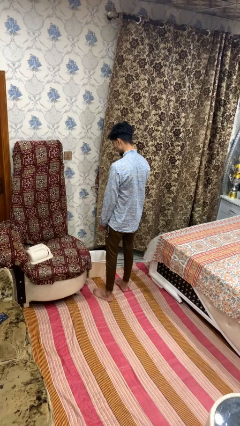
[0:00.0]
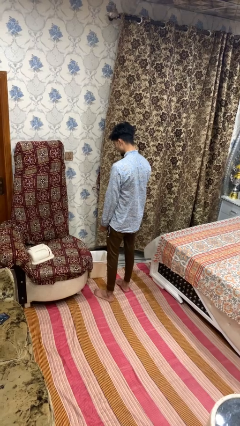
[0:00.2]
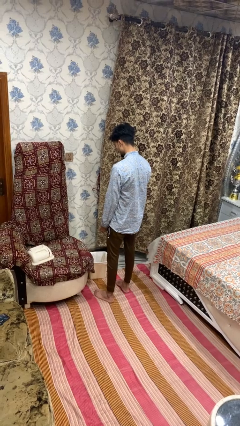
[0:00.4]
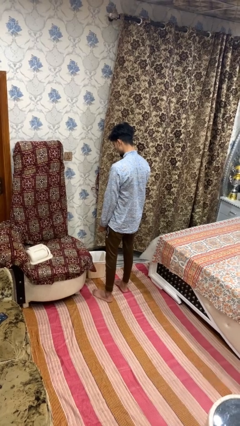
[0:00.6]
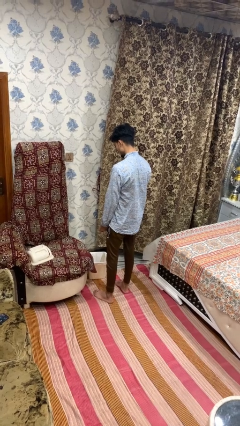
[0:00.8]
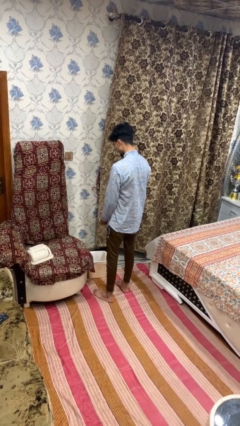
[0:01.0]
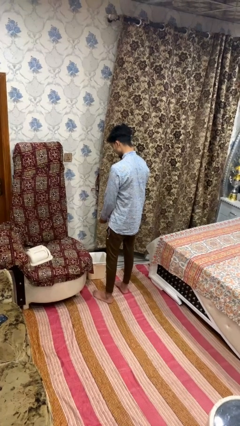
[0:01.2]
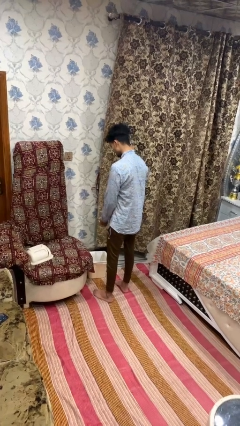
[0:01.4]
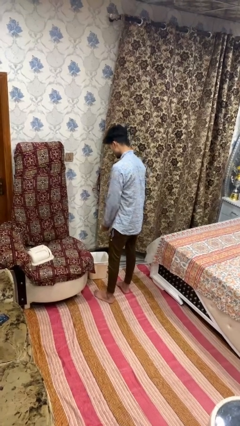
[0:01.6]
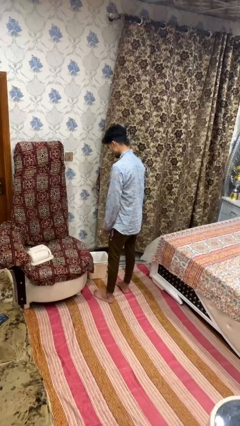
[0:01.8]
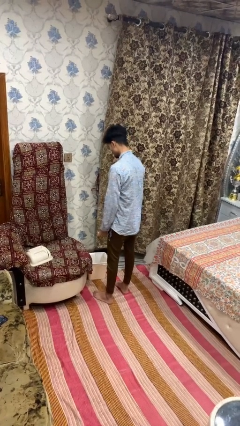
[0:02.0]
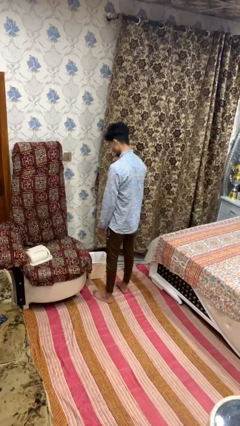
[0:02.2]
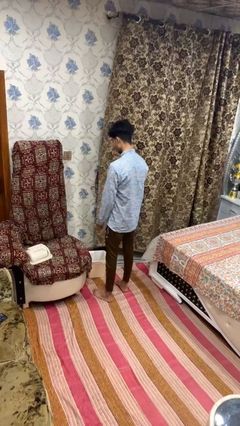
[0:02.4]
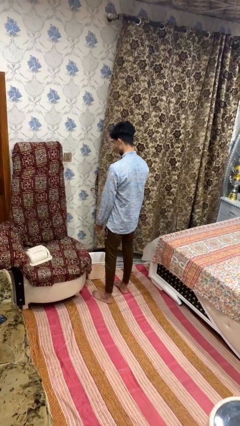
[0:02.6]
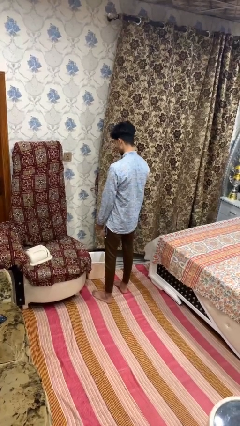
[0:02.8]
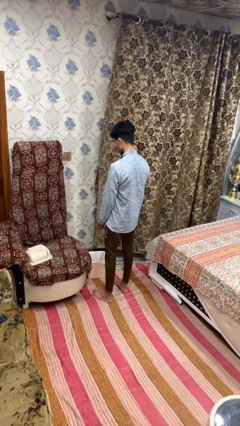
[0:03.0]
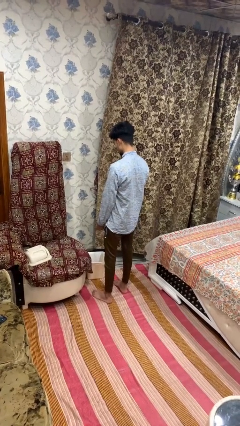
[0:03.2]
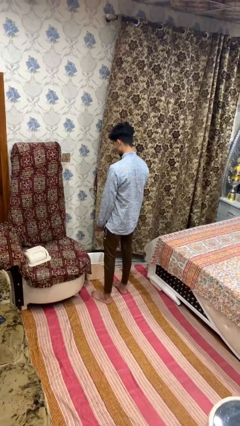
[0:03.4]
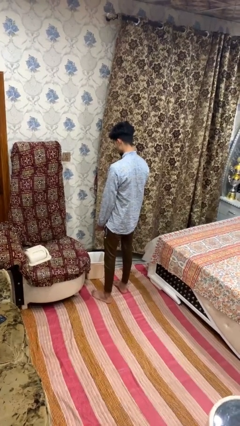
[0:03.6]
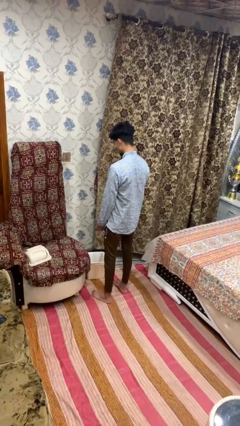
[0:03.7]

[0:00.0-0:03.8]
person discards trash

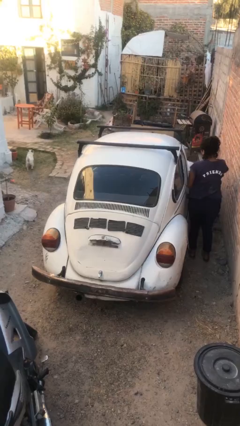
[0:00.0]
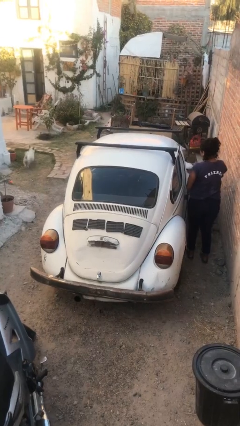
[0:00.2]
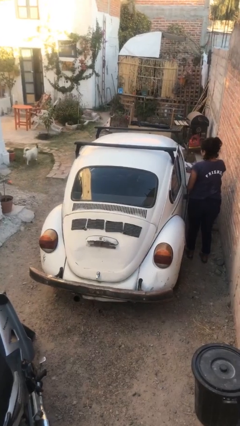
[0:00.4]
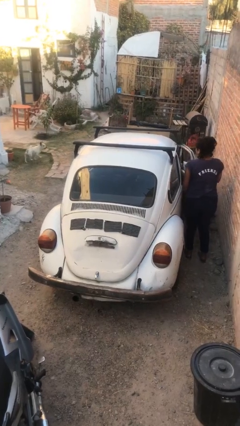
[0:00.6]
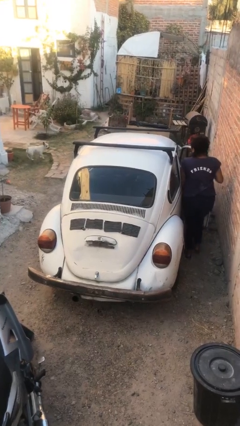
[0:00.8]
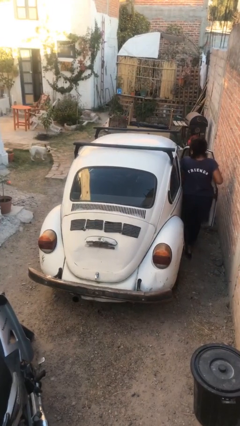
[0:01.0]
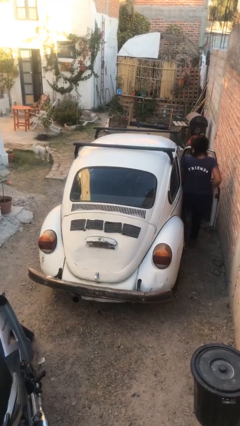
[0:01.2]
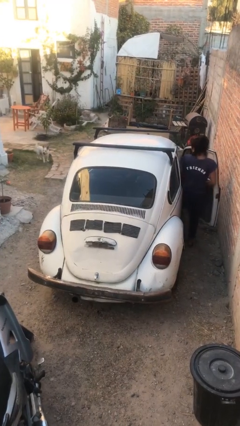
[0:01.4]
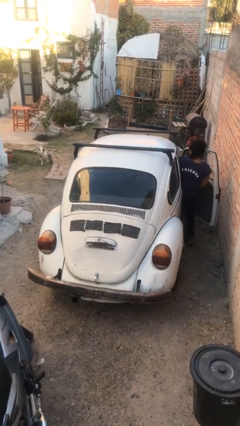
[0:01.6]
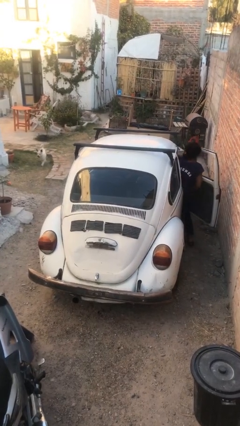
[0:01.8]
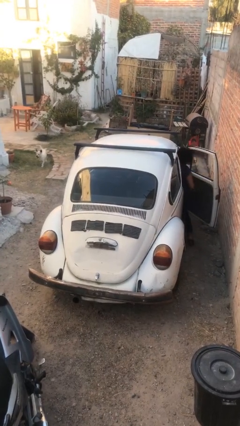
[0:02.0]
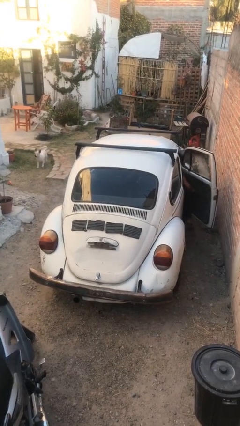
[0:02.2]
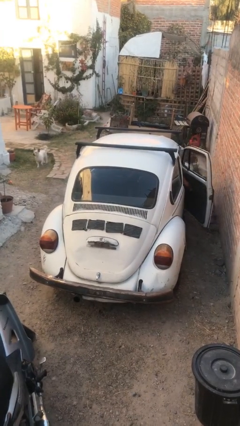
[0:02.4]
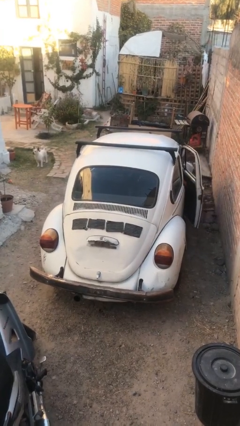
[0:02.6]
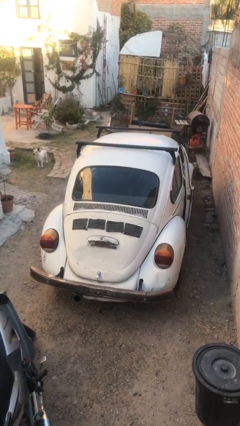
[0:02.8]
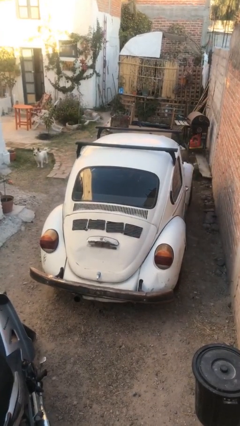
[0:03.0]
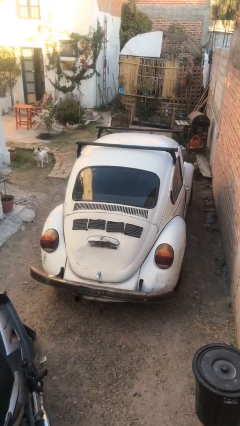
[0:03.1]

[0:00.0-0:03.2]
car picks up person

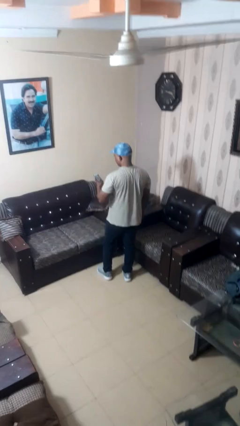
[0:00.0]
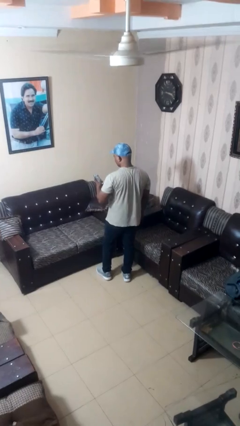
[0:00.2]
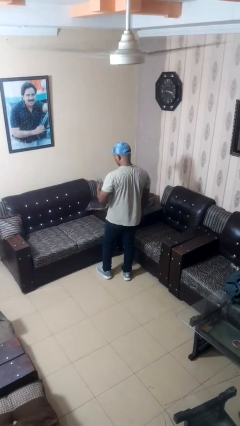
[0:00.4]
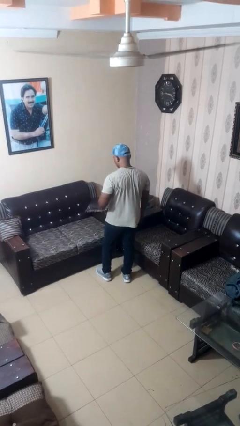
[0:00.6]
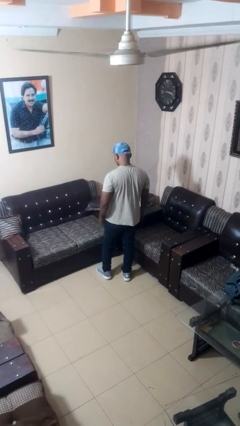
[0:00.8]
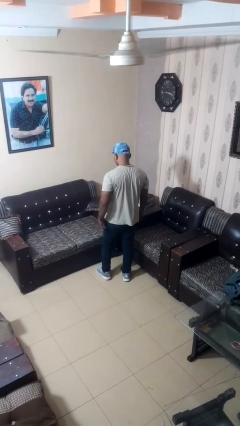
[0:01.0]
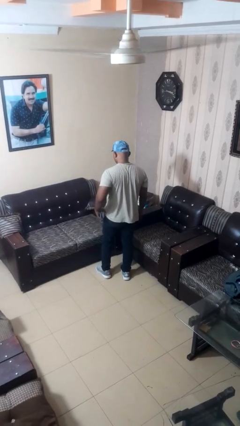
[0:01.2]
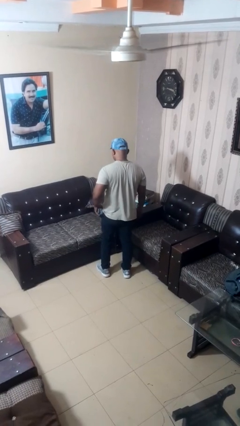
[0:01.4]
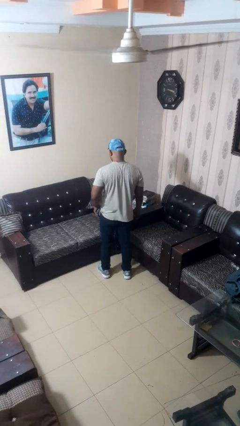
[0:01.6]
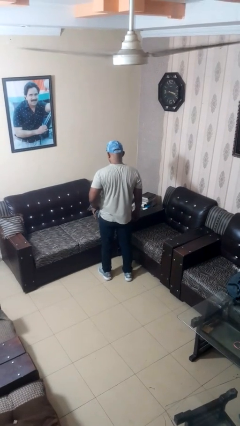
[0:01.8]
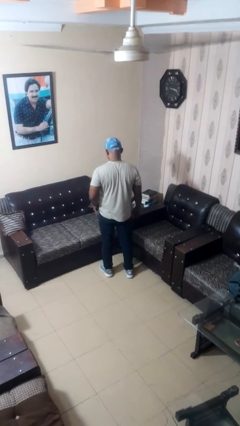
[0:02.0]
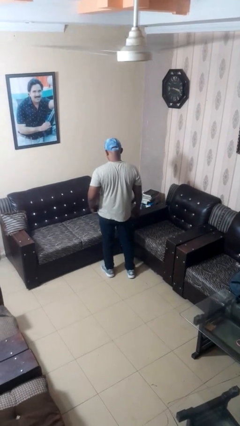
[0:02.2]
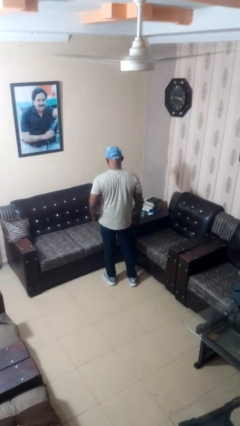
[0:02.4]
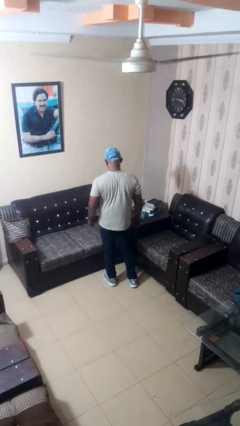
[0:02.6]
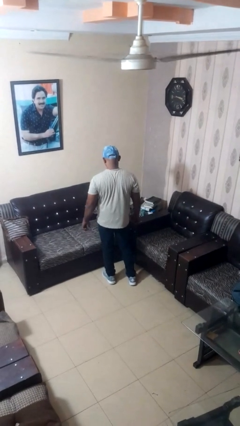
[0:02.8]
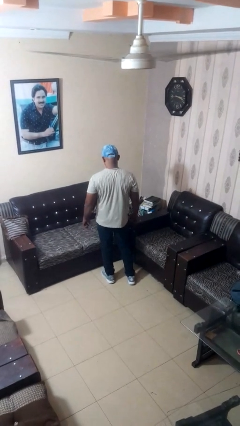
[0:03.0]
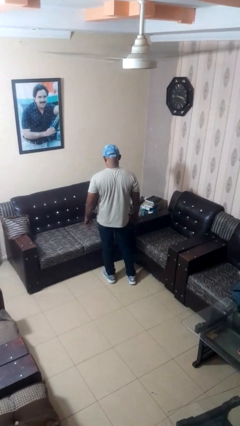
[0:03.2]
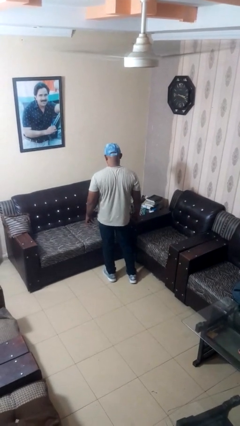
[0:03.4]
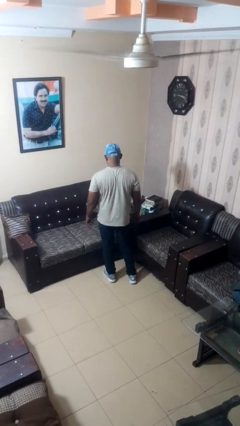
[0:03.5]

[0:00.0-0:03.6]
person puts phone into pocket

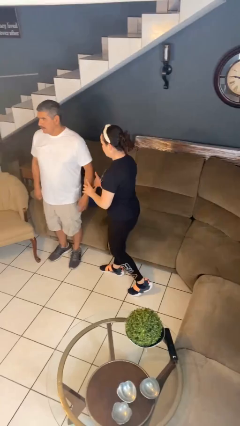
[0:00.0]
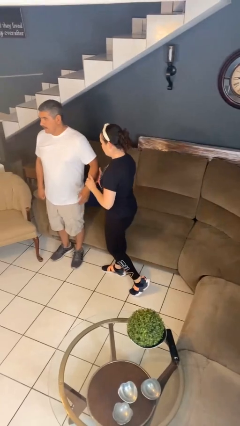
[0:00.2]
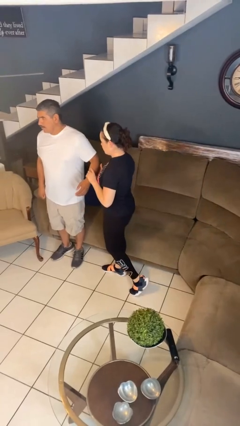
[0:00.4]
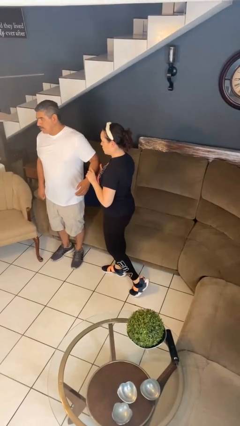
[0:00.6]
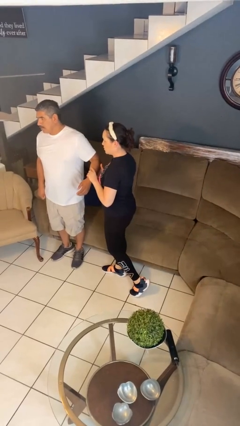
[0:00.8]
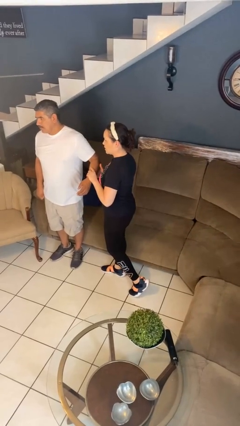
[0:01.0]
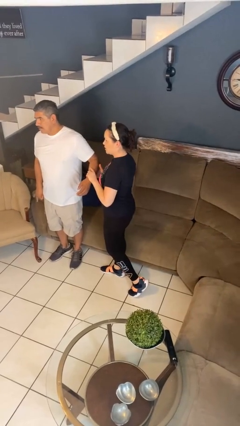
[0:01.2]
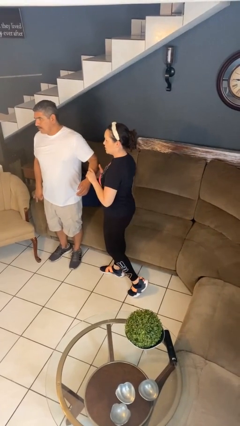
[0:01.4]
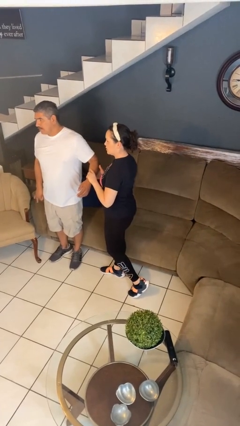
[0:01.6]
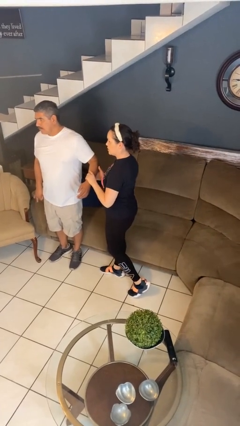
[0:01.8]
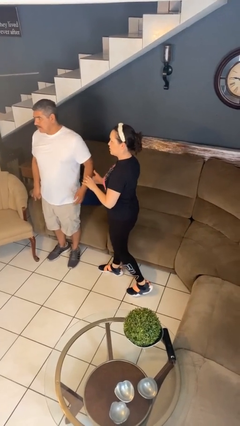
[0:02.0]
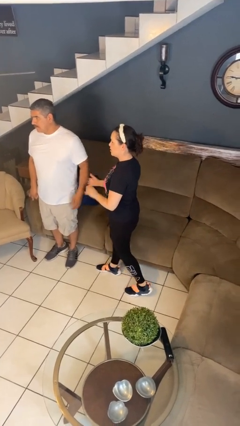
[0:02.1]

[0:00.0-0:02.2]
person grabs person by forearm

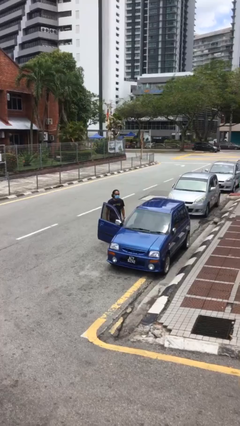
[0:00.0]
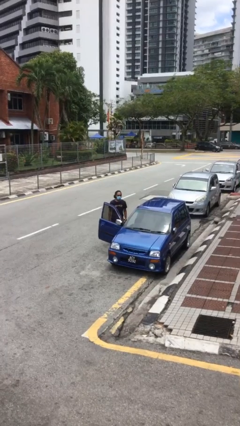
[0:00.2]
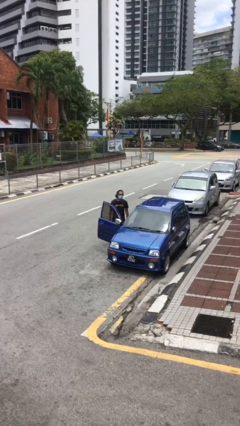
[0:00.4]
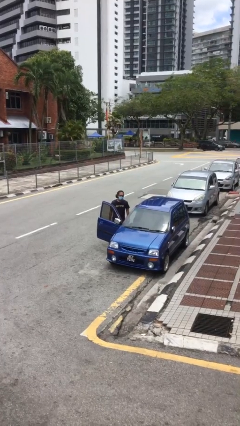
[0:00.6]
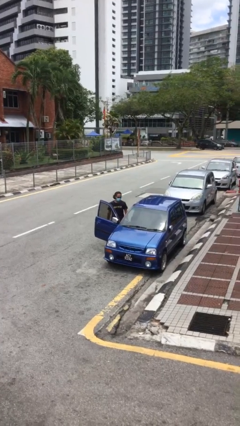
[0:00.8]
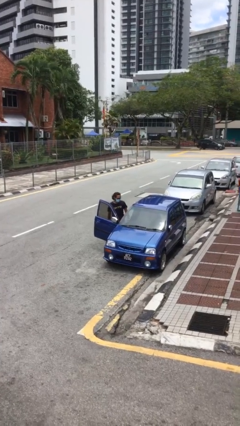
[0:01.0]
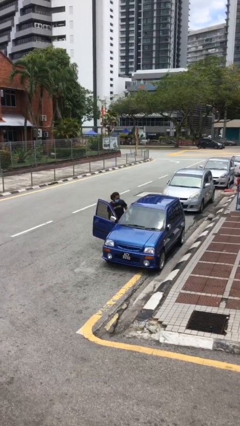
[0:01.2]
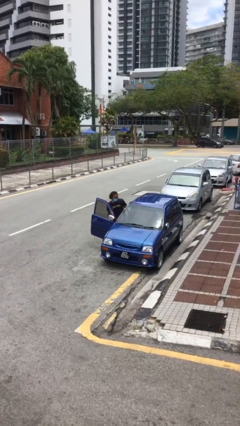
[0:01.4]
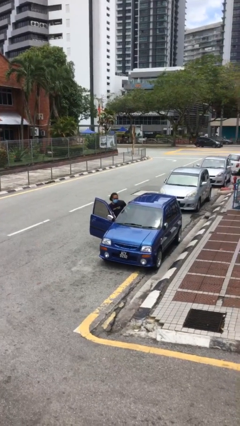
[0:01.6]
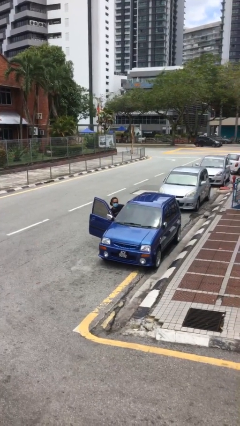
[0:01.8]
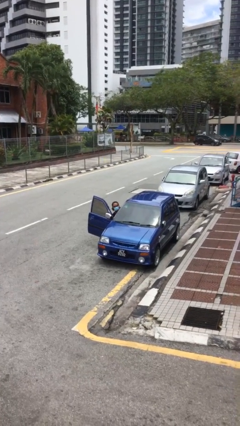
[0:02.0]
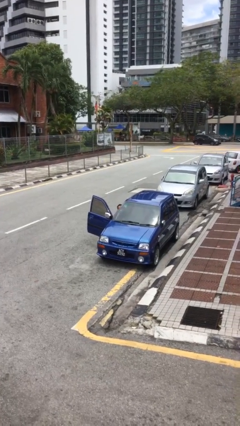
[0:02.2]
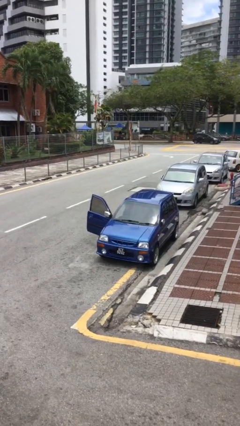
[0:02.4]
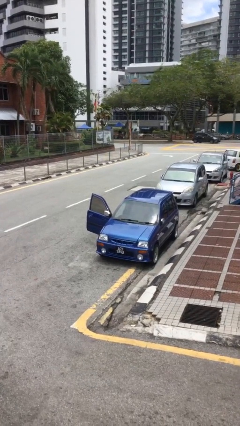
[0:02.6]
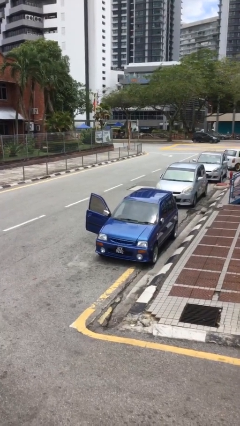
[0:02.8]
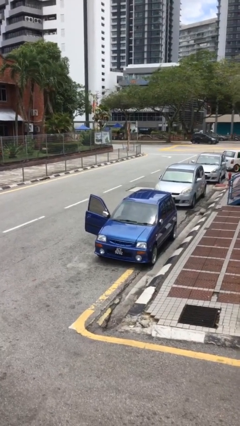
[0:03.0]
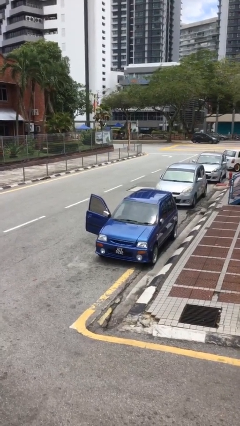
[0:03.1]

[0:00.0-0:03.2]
person enters car

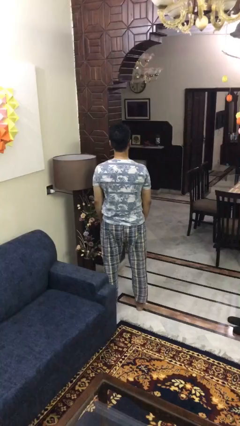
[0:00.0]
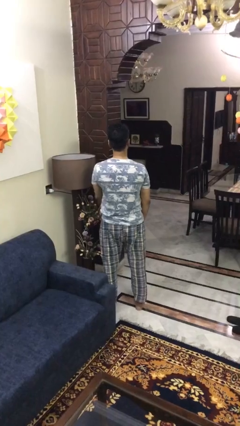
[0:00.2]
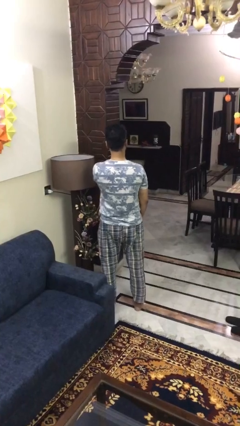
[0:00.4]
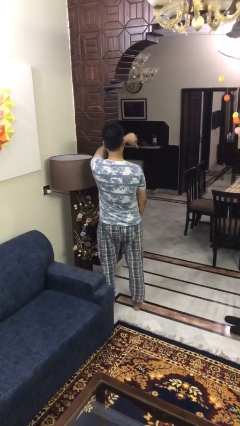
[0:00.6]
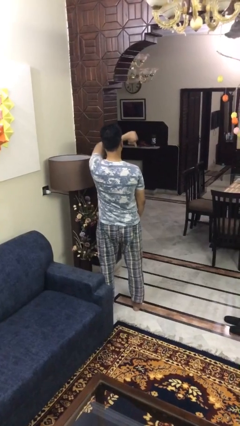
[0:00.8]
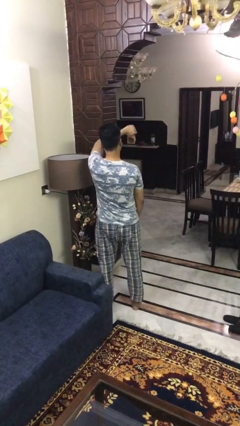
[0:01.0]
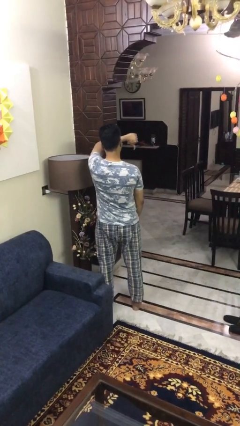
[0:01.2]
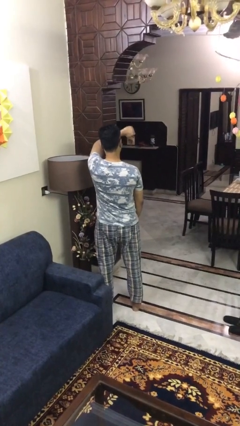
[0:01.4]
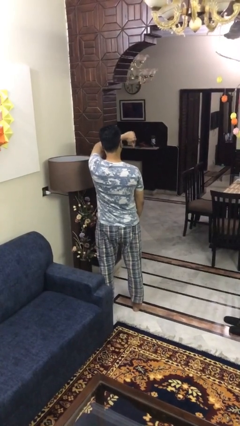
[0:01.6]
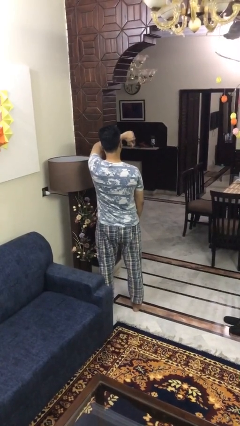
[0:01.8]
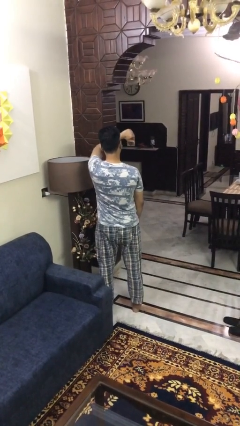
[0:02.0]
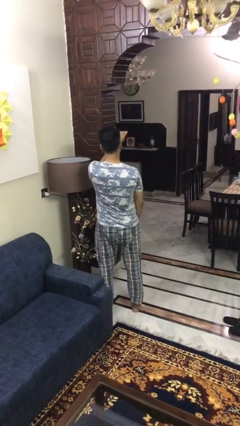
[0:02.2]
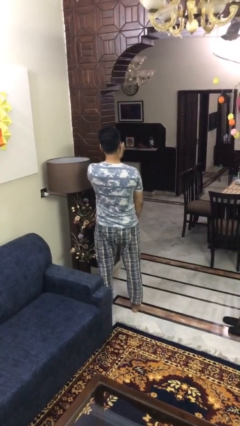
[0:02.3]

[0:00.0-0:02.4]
person gestures thumbs down
